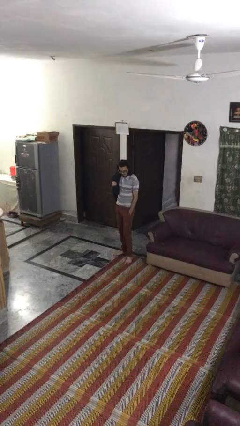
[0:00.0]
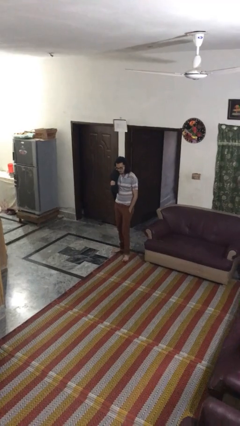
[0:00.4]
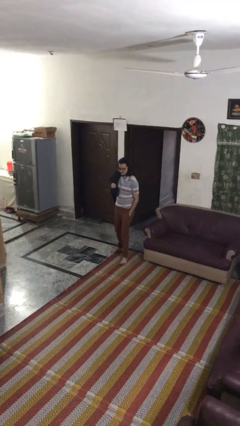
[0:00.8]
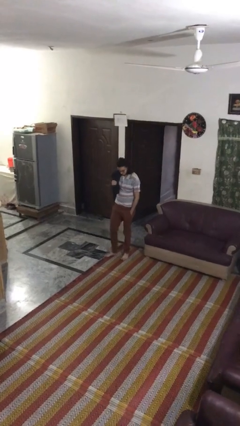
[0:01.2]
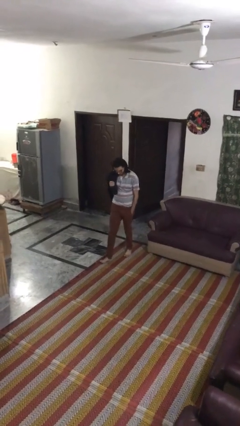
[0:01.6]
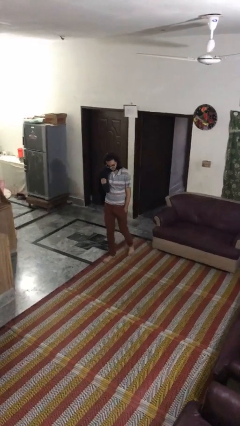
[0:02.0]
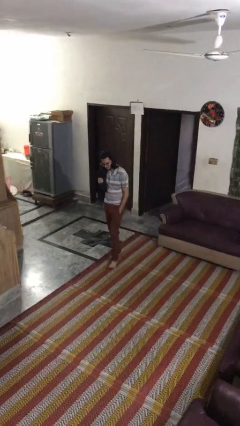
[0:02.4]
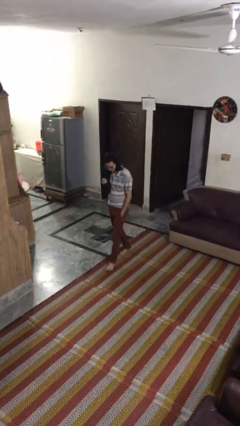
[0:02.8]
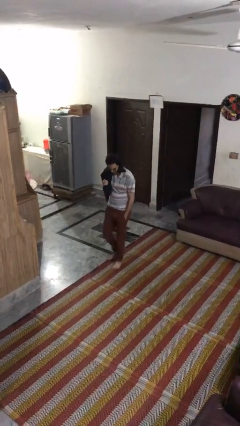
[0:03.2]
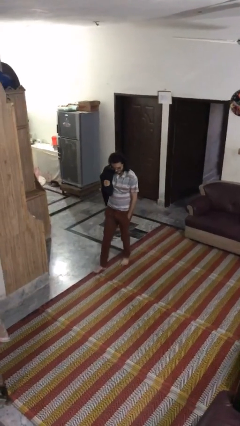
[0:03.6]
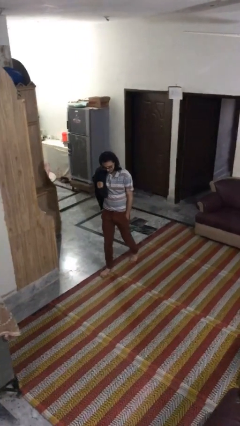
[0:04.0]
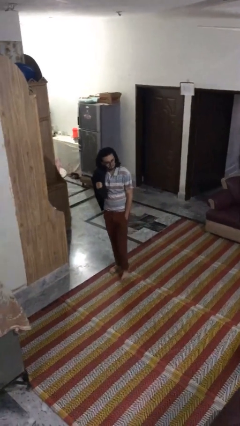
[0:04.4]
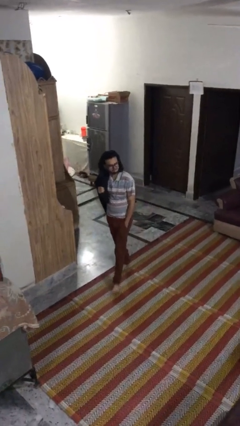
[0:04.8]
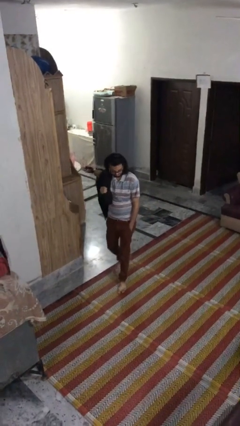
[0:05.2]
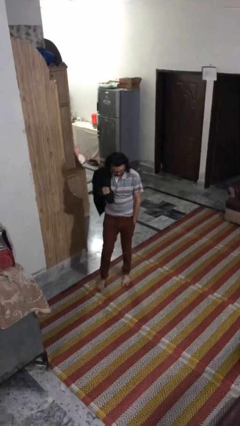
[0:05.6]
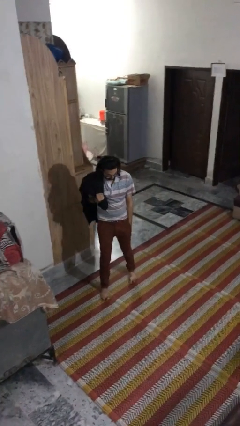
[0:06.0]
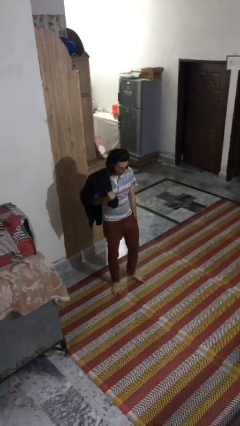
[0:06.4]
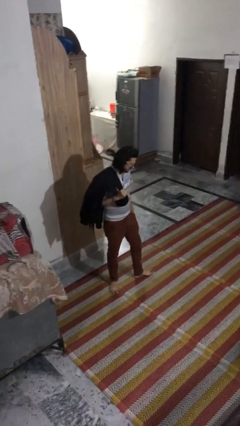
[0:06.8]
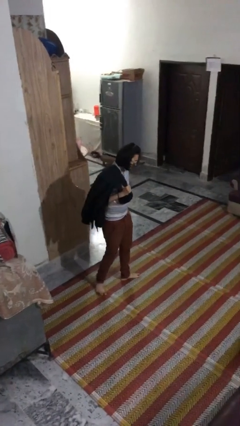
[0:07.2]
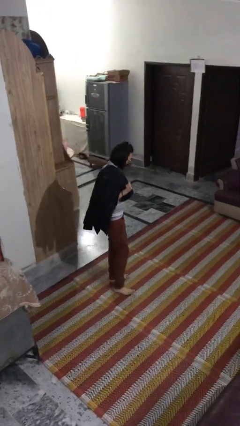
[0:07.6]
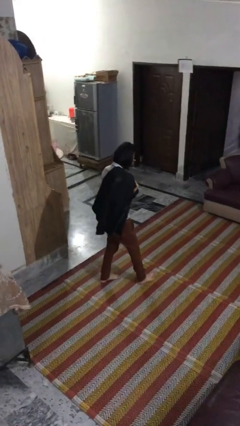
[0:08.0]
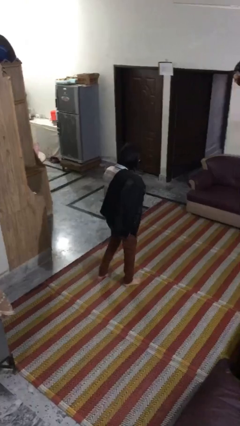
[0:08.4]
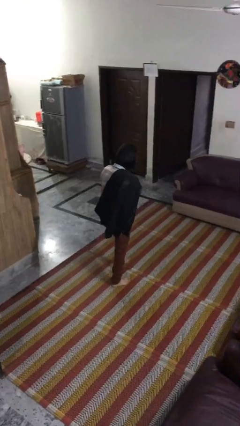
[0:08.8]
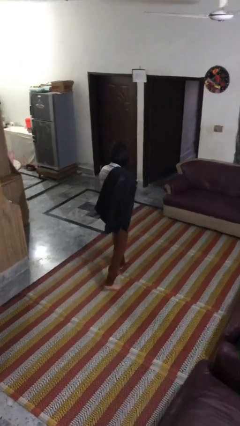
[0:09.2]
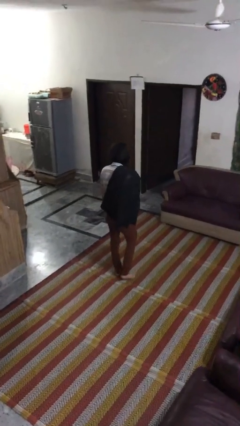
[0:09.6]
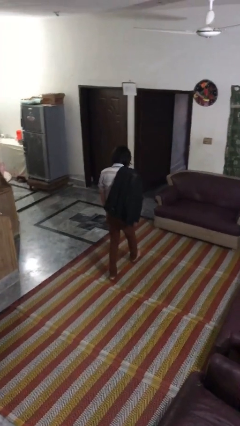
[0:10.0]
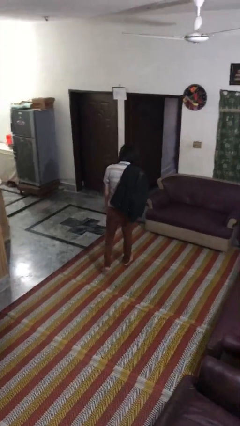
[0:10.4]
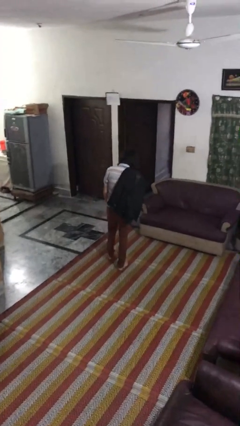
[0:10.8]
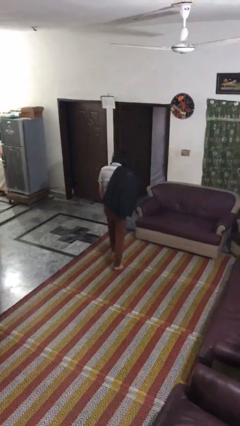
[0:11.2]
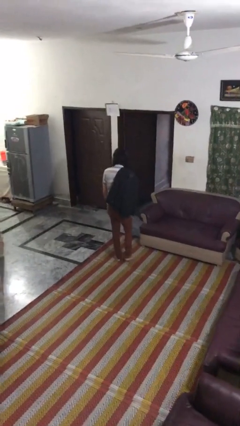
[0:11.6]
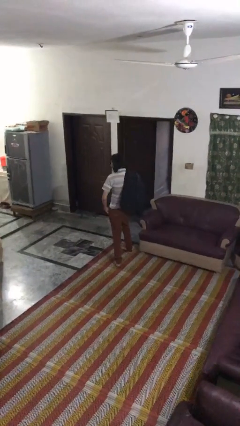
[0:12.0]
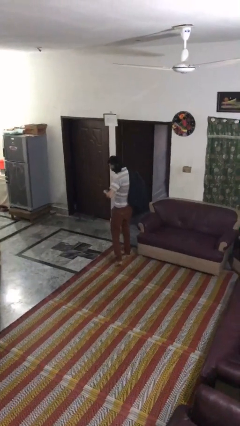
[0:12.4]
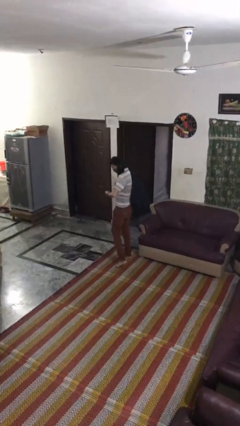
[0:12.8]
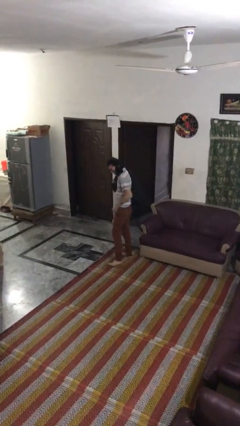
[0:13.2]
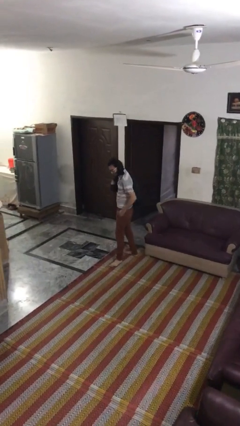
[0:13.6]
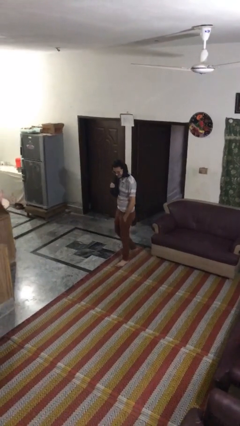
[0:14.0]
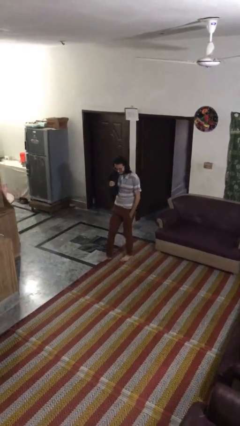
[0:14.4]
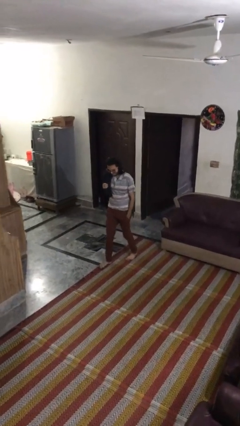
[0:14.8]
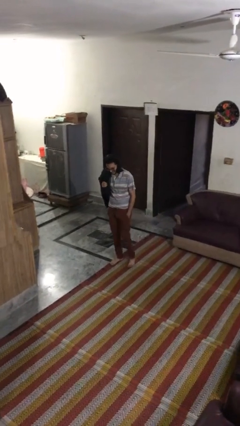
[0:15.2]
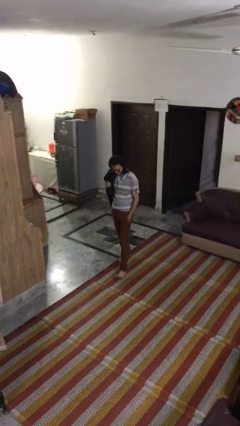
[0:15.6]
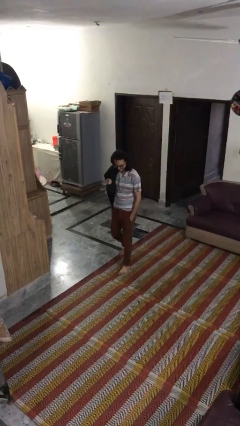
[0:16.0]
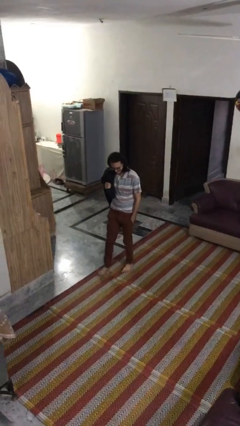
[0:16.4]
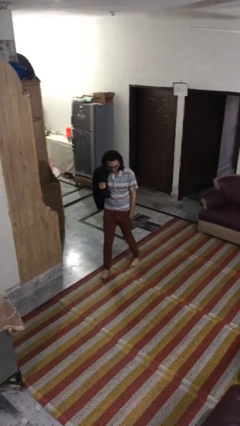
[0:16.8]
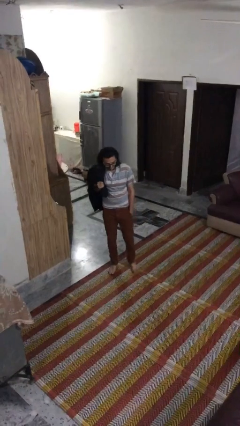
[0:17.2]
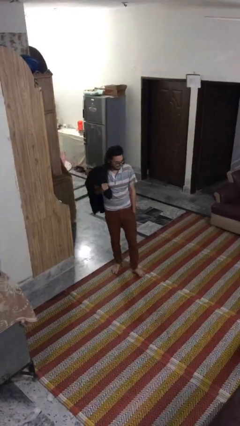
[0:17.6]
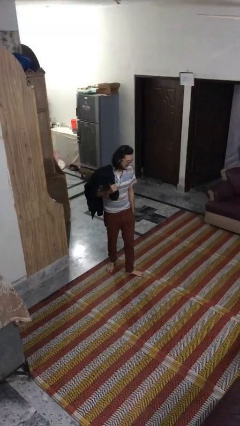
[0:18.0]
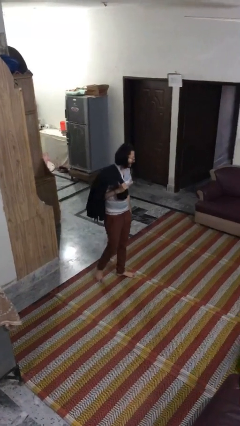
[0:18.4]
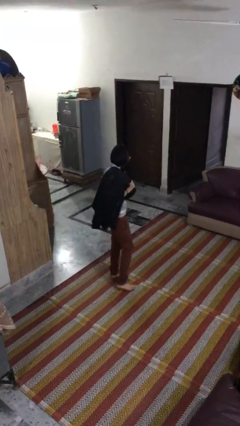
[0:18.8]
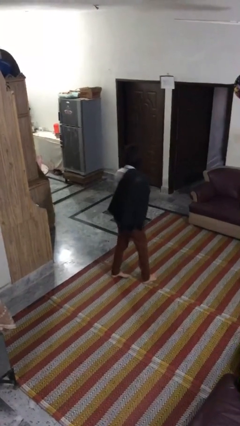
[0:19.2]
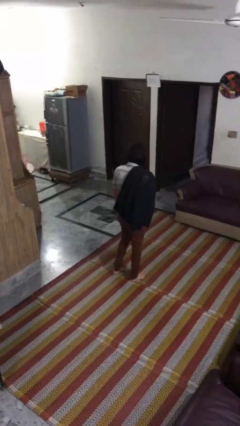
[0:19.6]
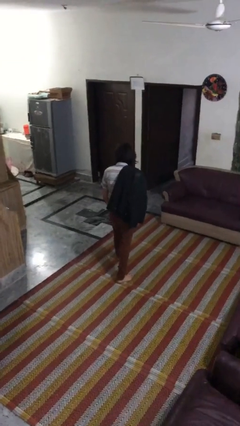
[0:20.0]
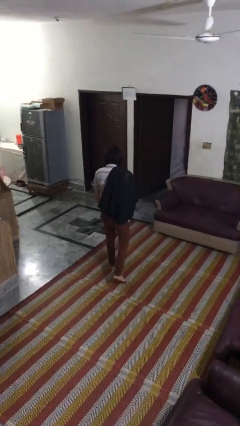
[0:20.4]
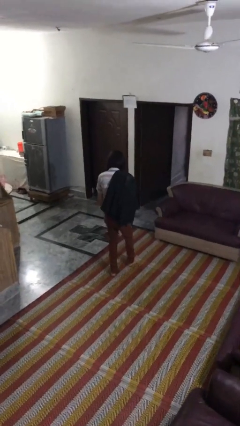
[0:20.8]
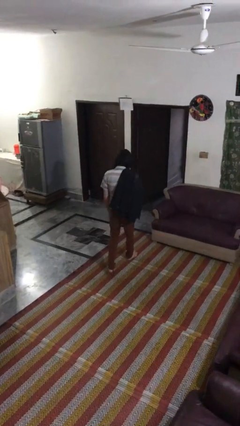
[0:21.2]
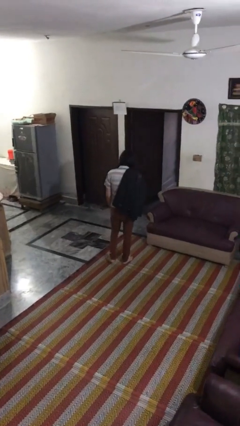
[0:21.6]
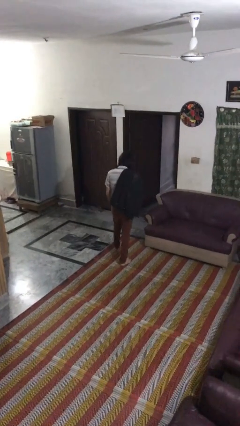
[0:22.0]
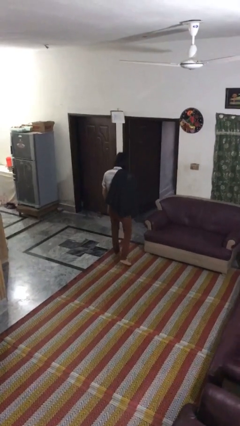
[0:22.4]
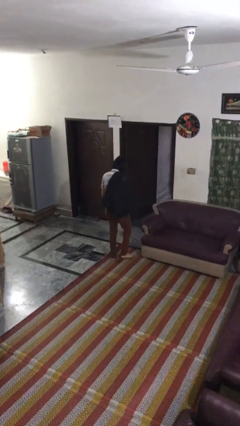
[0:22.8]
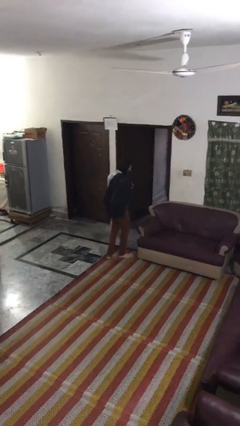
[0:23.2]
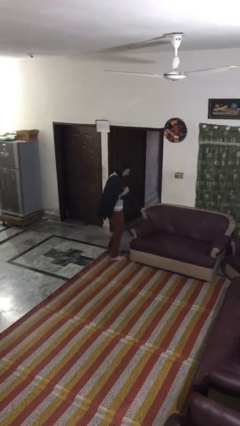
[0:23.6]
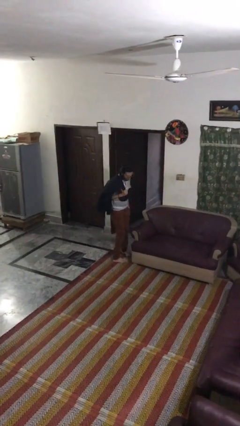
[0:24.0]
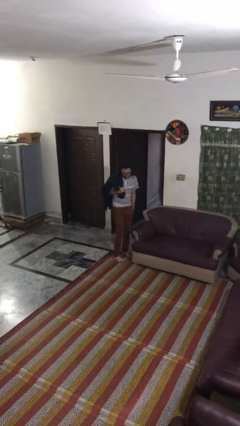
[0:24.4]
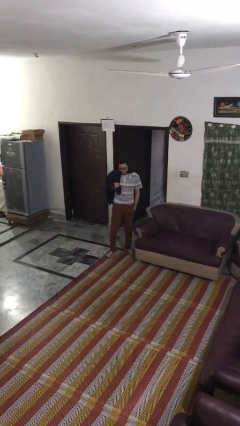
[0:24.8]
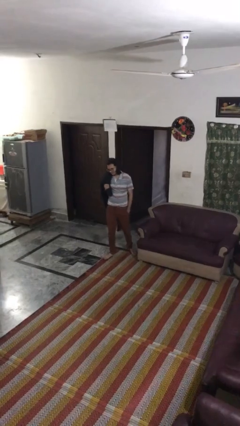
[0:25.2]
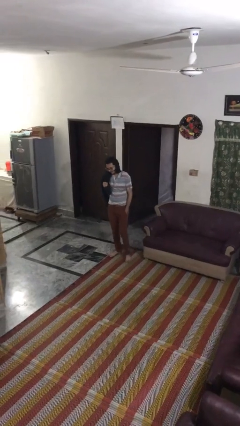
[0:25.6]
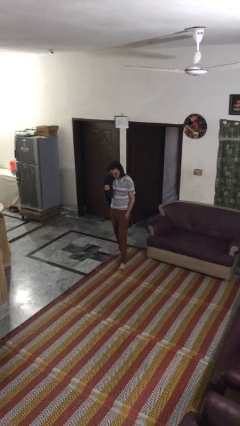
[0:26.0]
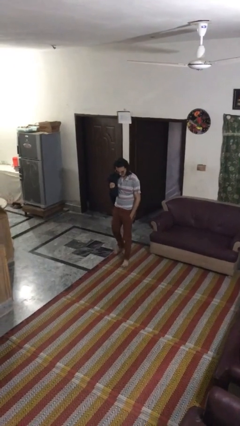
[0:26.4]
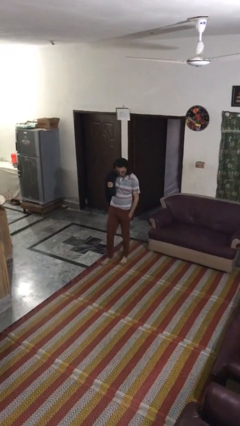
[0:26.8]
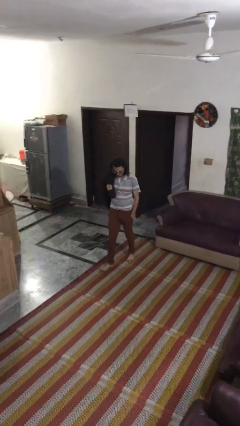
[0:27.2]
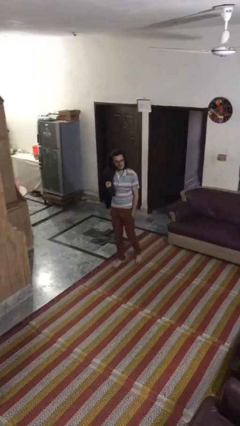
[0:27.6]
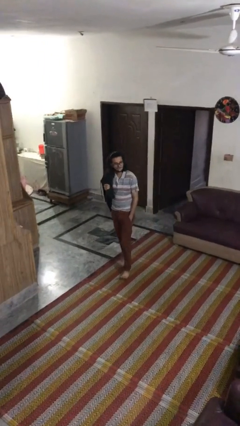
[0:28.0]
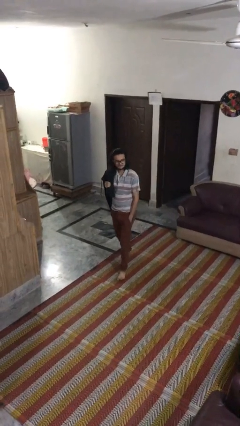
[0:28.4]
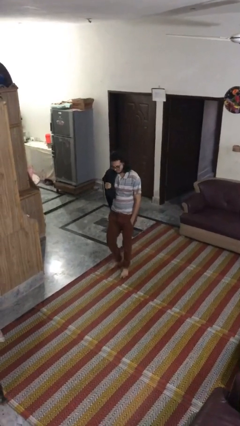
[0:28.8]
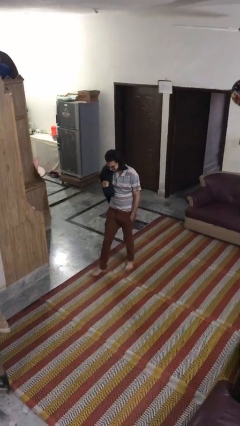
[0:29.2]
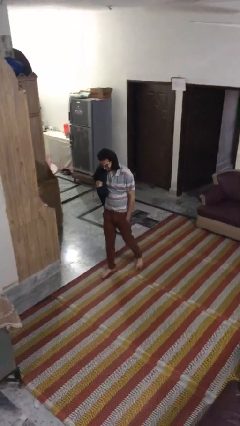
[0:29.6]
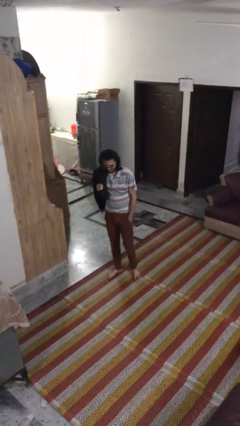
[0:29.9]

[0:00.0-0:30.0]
person walks

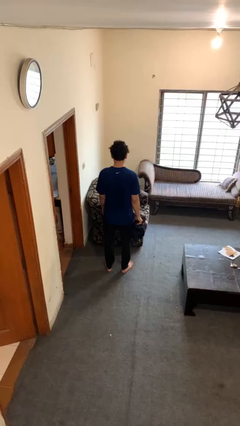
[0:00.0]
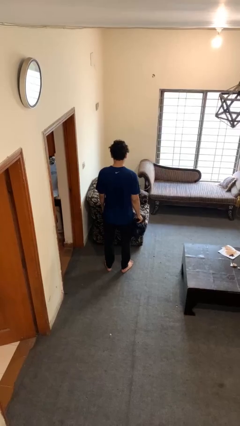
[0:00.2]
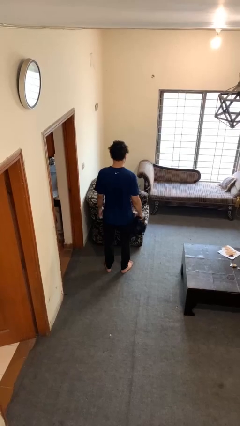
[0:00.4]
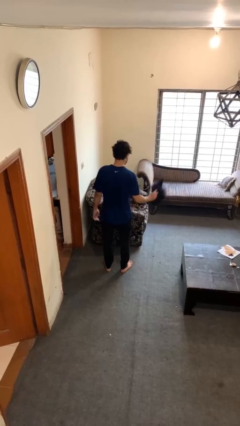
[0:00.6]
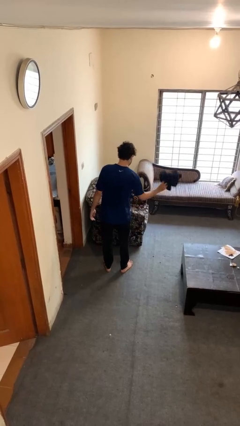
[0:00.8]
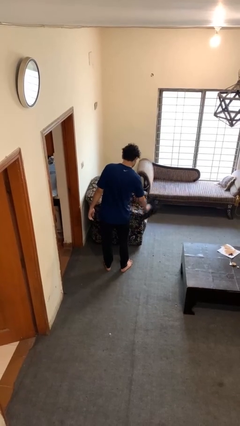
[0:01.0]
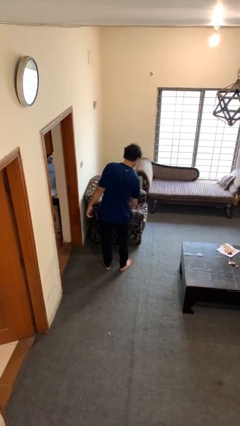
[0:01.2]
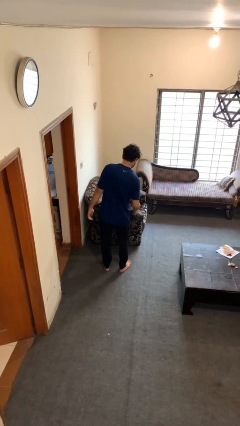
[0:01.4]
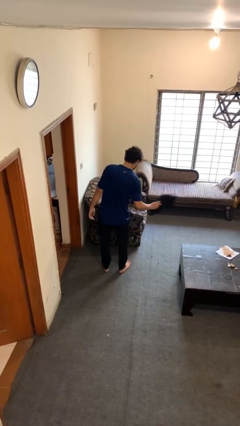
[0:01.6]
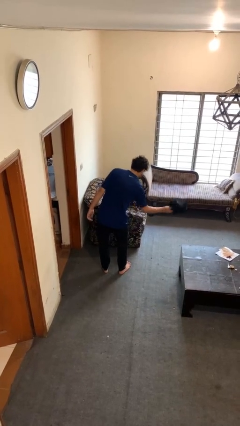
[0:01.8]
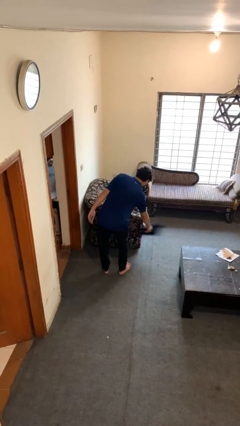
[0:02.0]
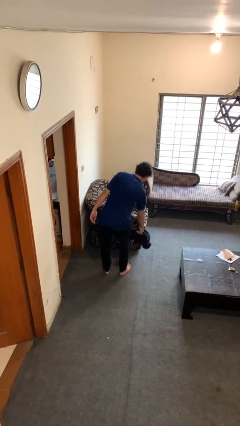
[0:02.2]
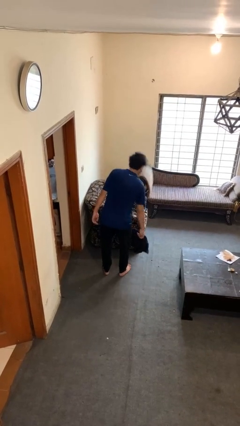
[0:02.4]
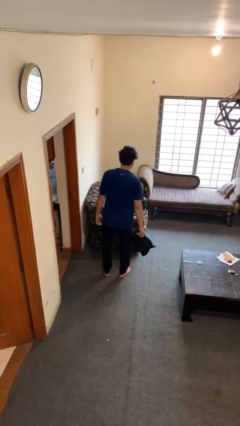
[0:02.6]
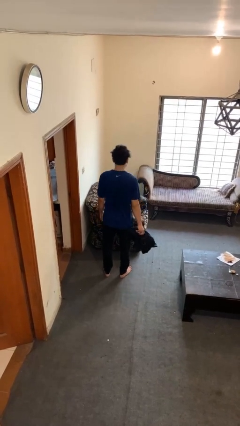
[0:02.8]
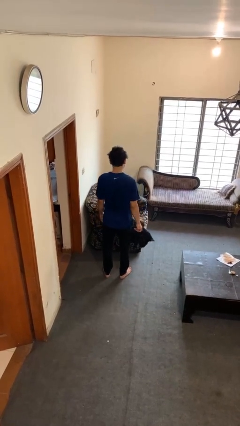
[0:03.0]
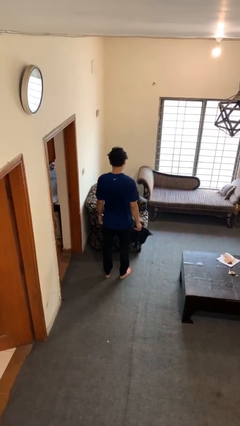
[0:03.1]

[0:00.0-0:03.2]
person dusts furniture

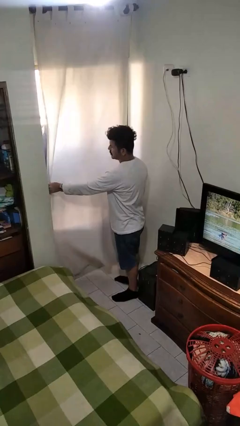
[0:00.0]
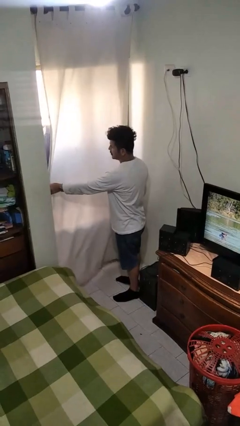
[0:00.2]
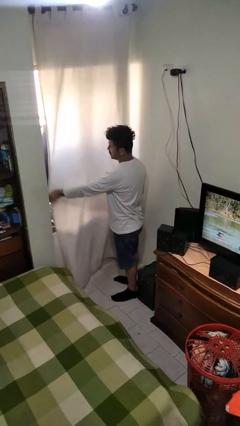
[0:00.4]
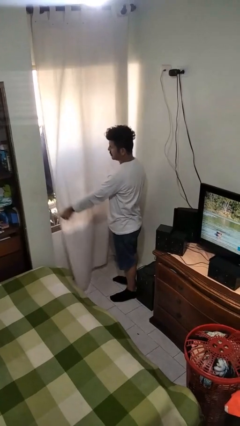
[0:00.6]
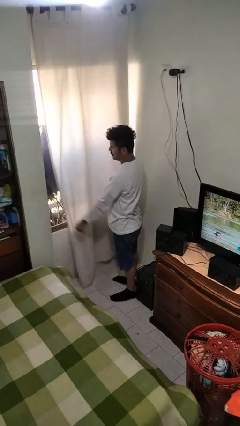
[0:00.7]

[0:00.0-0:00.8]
person closes curtains
